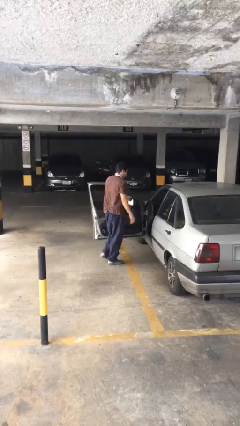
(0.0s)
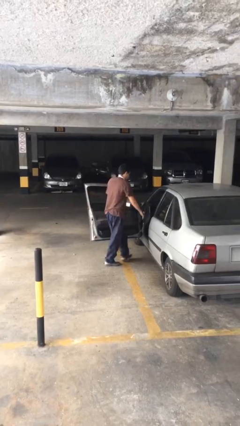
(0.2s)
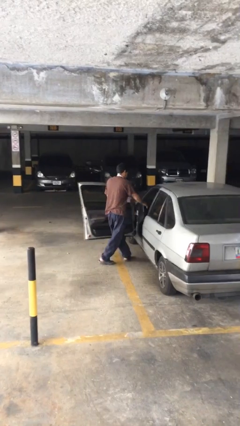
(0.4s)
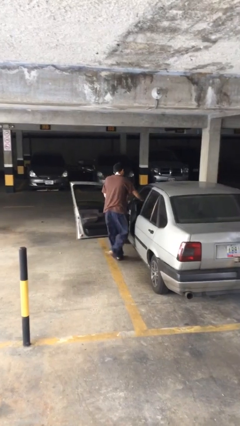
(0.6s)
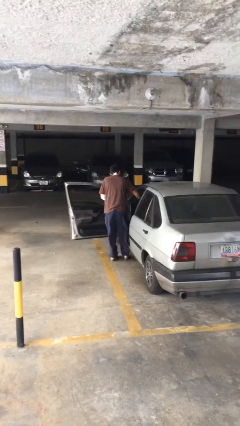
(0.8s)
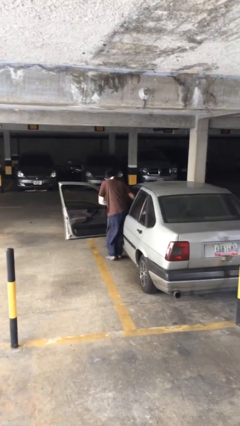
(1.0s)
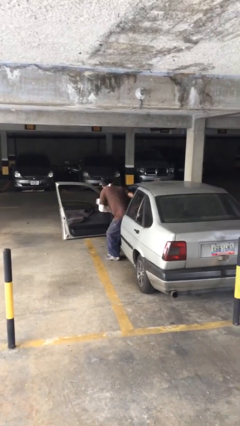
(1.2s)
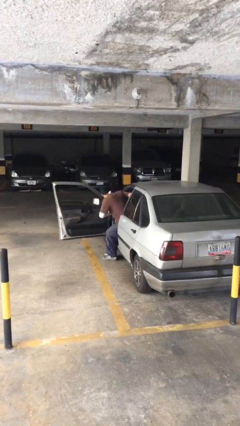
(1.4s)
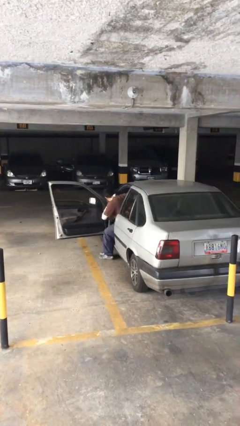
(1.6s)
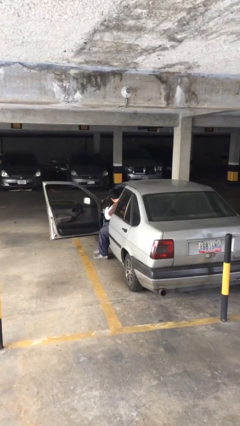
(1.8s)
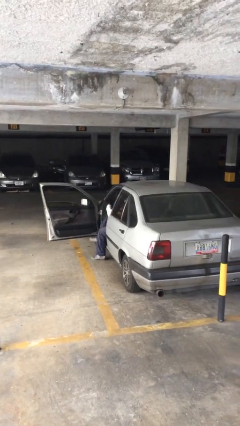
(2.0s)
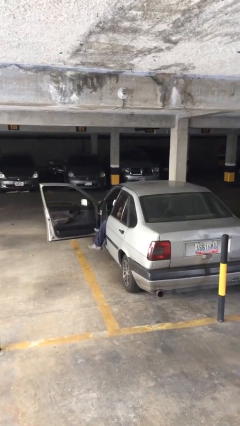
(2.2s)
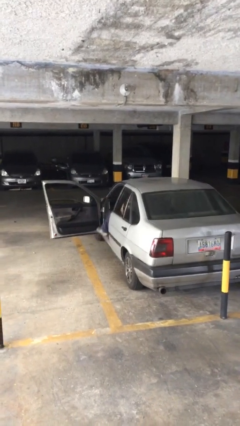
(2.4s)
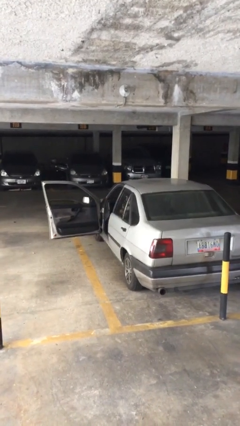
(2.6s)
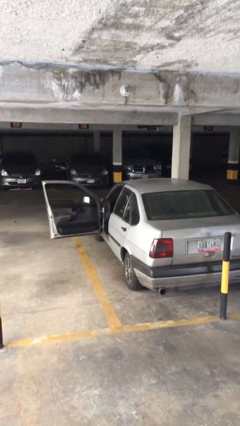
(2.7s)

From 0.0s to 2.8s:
person enters car

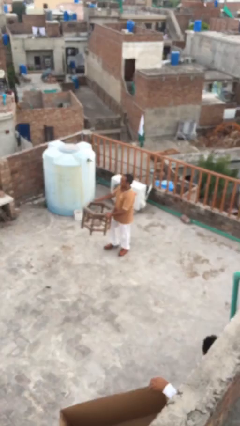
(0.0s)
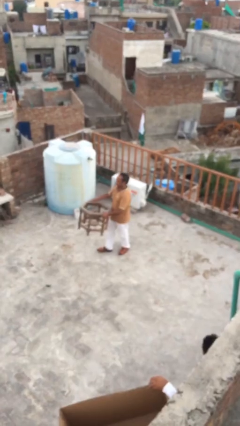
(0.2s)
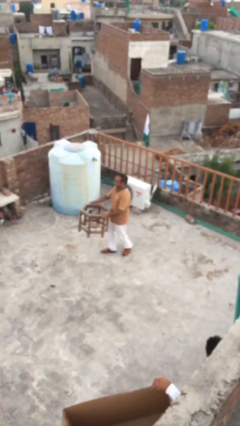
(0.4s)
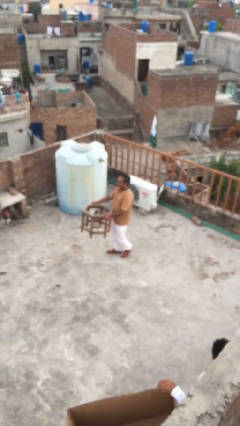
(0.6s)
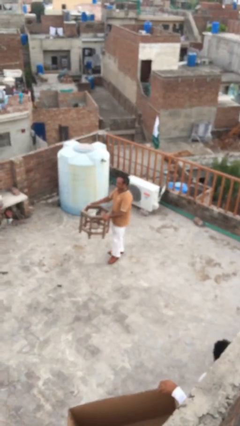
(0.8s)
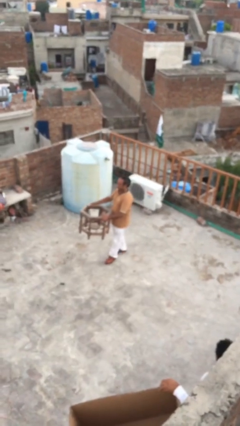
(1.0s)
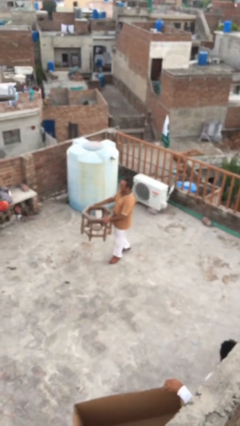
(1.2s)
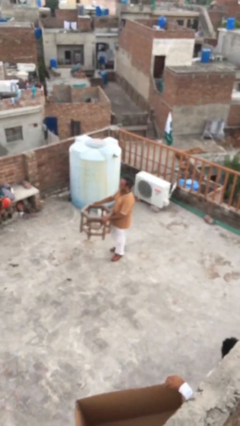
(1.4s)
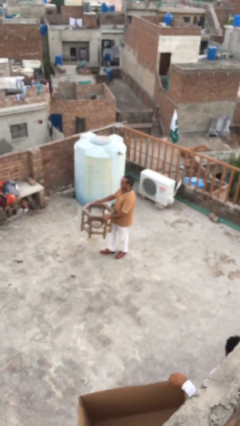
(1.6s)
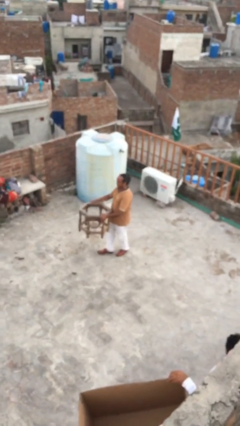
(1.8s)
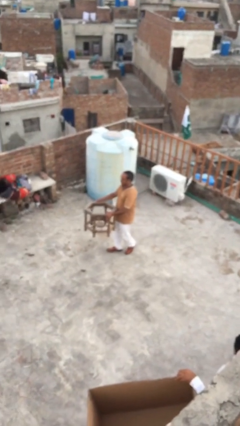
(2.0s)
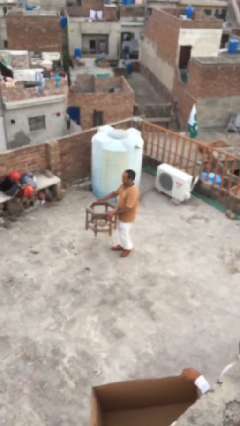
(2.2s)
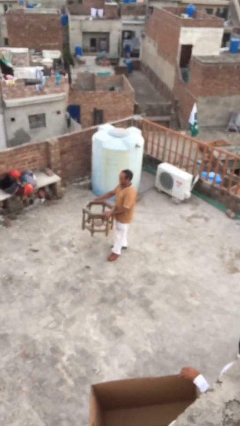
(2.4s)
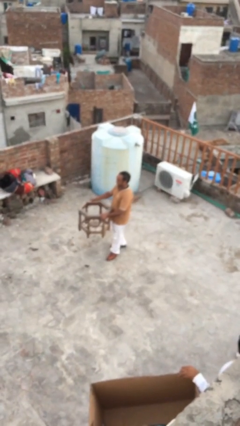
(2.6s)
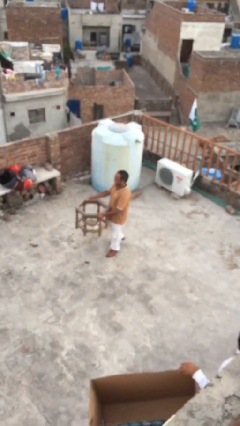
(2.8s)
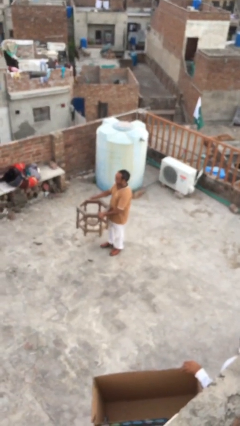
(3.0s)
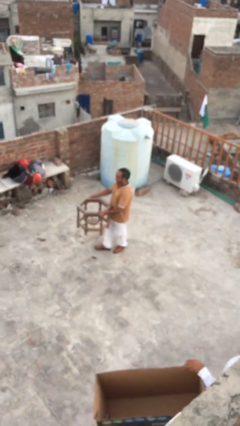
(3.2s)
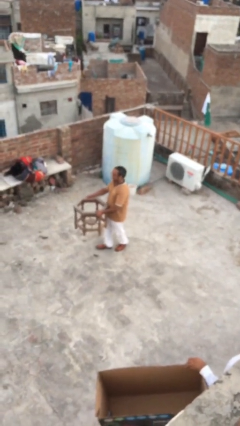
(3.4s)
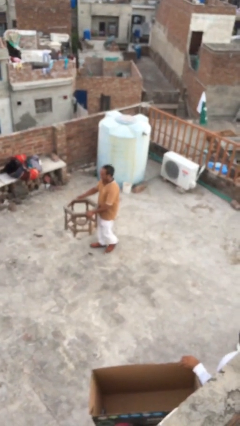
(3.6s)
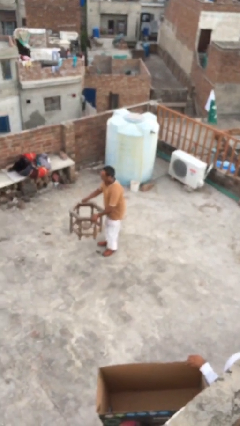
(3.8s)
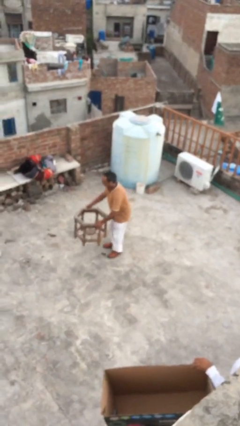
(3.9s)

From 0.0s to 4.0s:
person carries heavy object

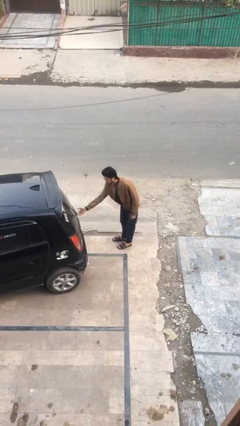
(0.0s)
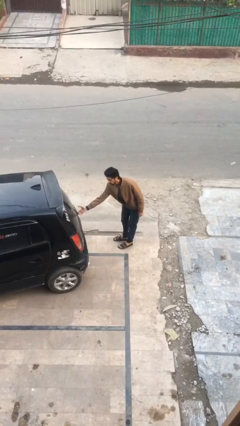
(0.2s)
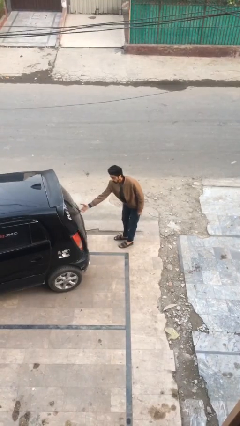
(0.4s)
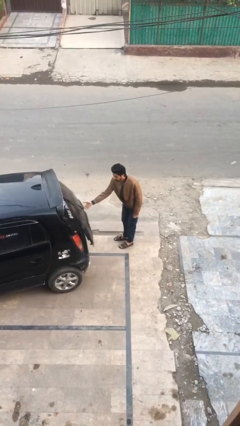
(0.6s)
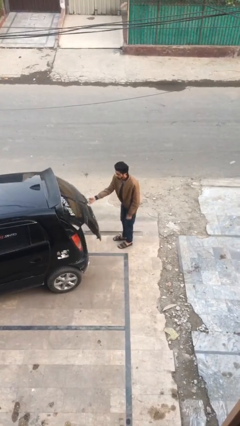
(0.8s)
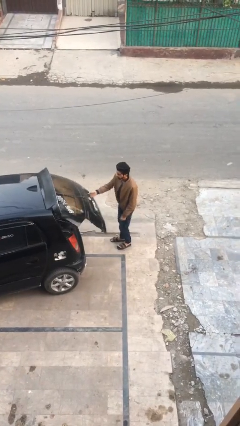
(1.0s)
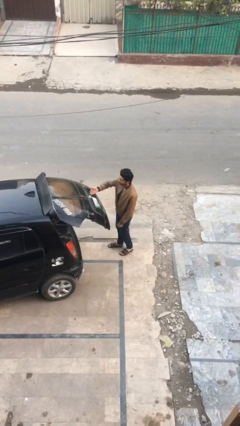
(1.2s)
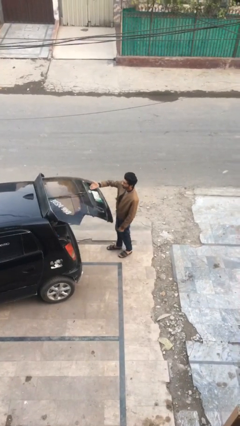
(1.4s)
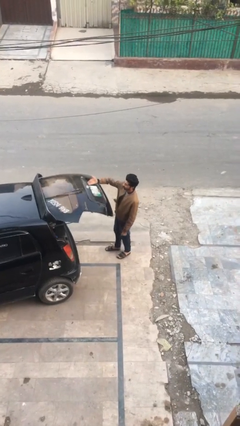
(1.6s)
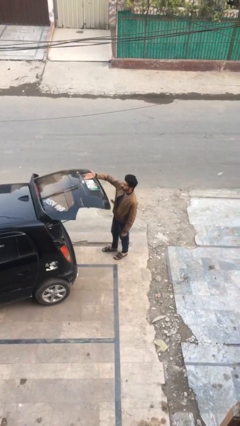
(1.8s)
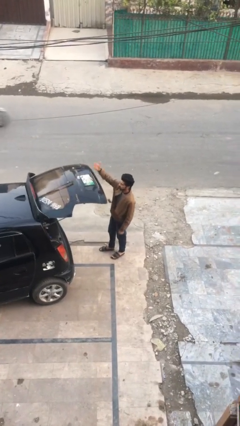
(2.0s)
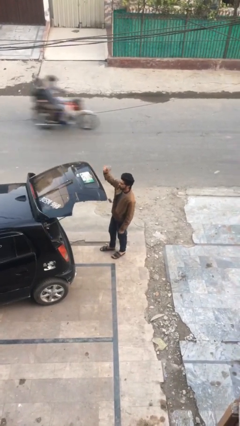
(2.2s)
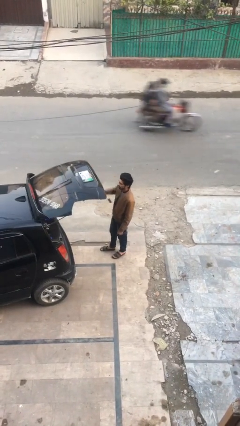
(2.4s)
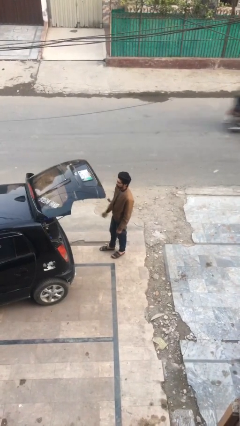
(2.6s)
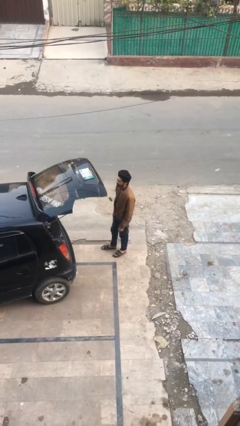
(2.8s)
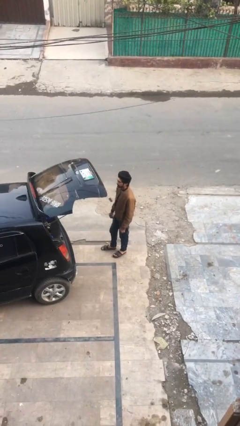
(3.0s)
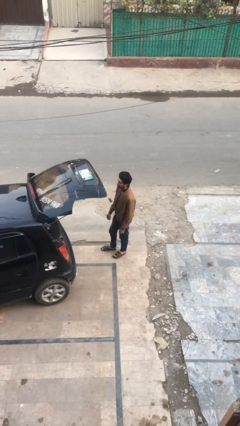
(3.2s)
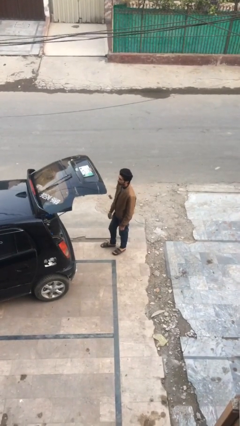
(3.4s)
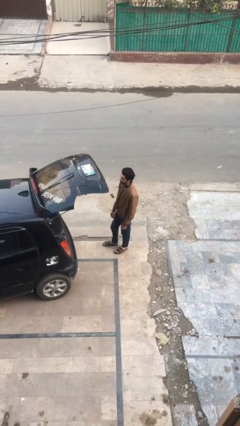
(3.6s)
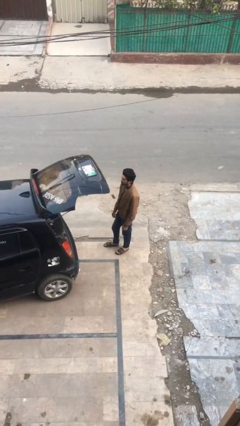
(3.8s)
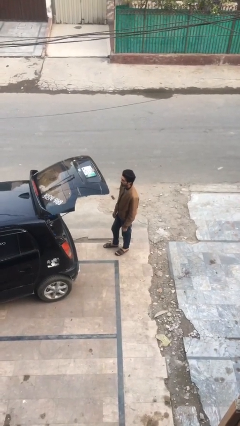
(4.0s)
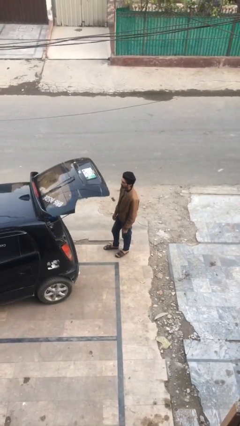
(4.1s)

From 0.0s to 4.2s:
person opens car trunk

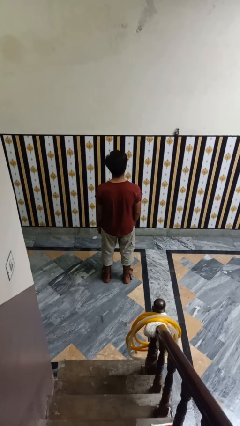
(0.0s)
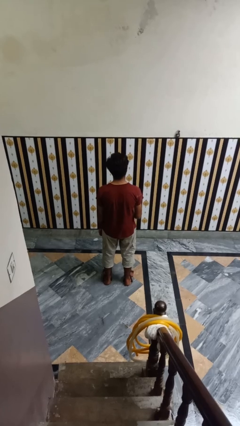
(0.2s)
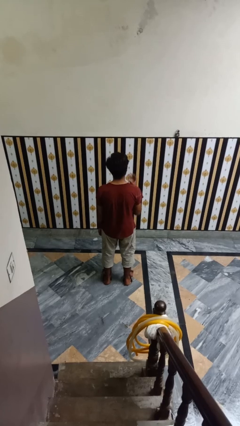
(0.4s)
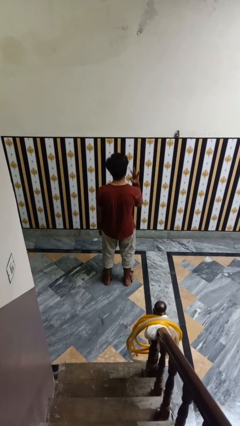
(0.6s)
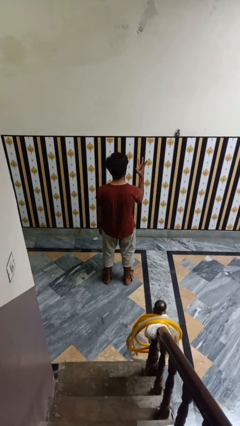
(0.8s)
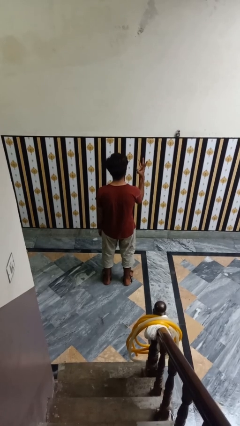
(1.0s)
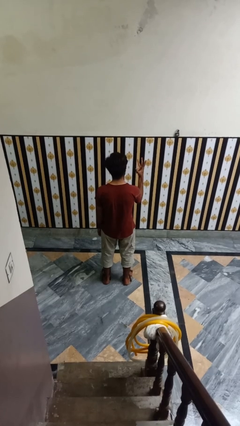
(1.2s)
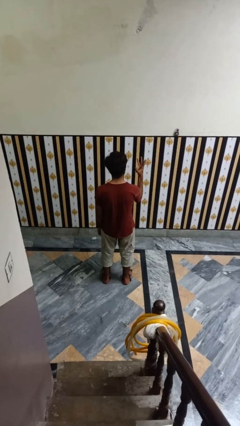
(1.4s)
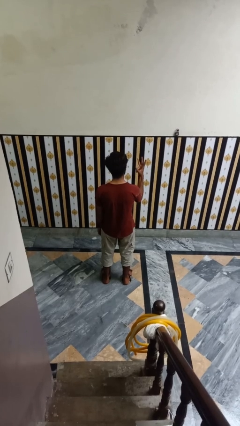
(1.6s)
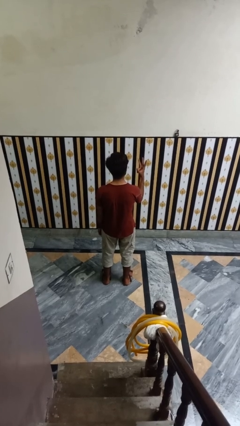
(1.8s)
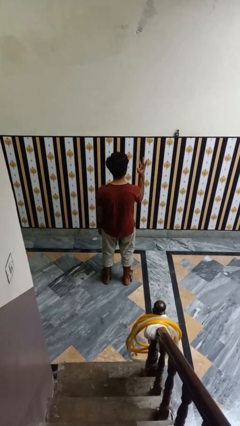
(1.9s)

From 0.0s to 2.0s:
person gestures number three

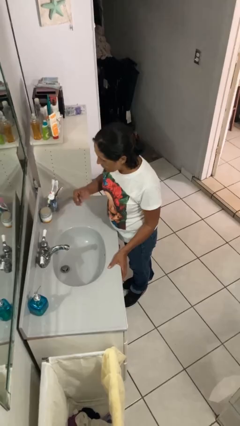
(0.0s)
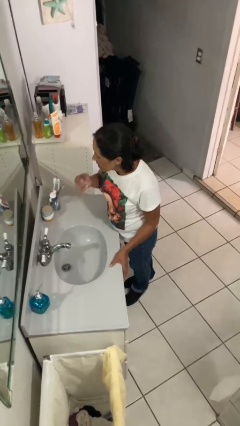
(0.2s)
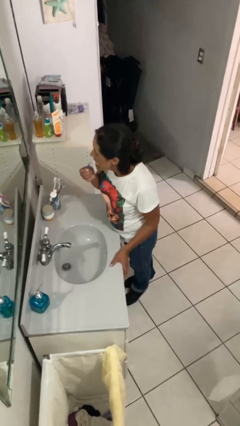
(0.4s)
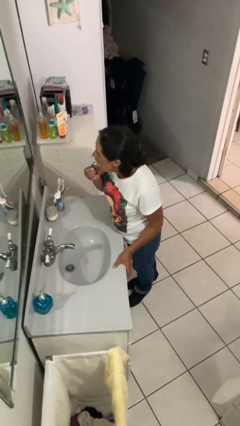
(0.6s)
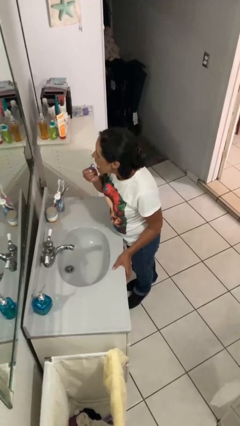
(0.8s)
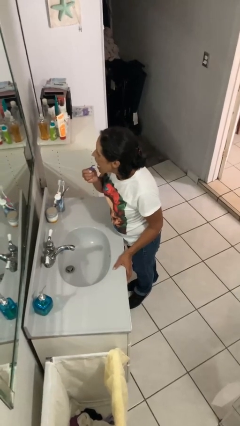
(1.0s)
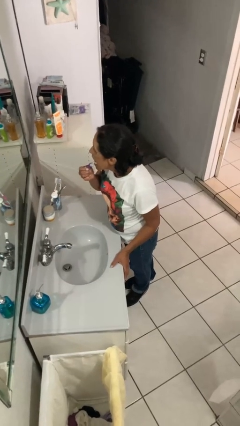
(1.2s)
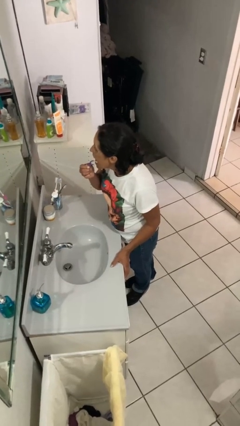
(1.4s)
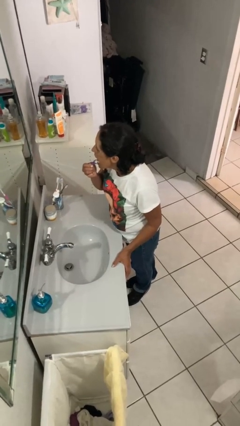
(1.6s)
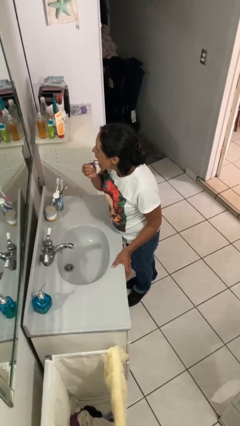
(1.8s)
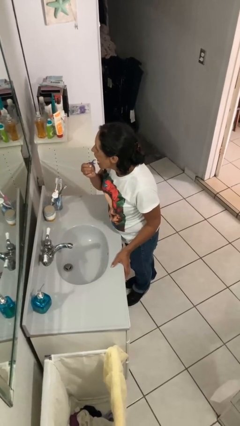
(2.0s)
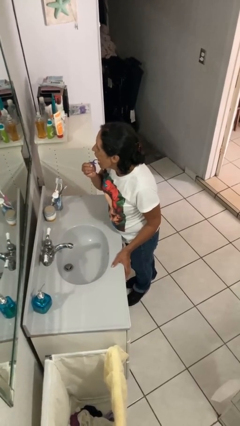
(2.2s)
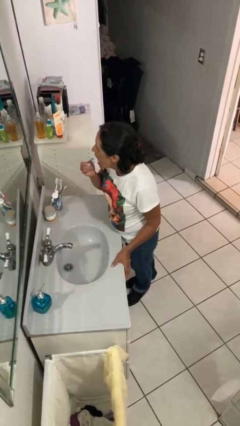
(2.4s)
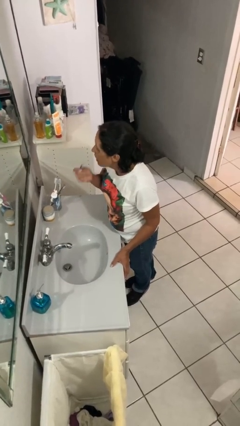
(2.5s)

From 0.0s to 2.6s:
person flosses

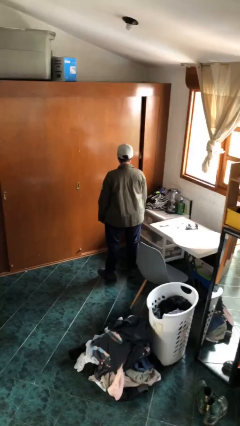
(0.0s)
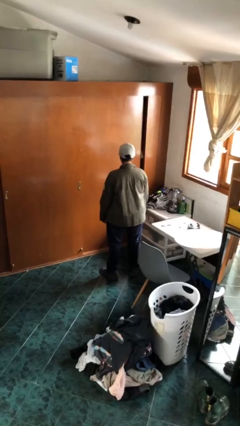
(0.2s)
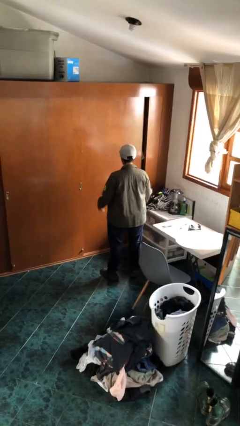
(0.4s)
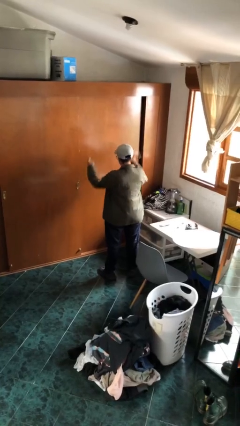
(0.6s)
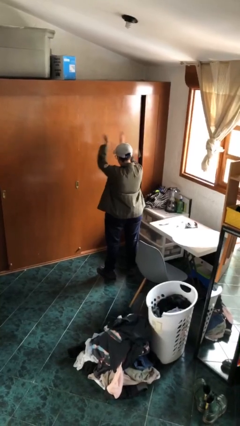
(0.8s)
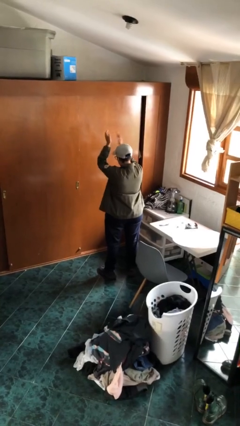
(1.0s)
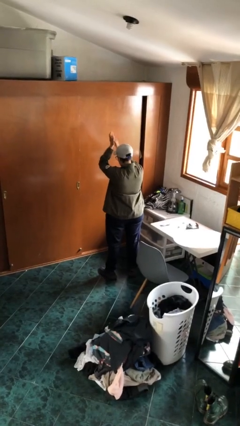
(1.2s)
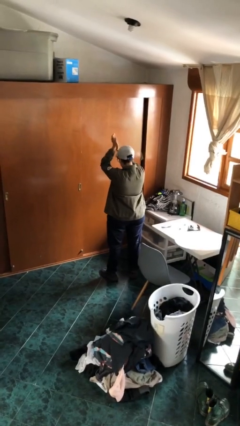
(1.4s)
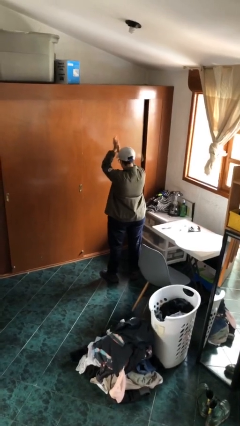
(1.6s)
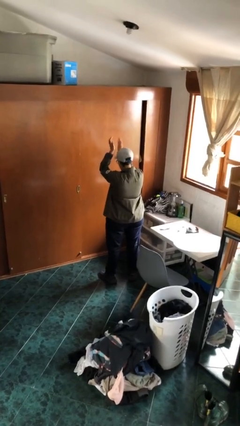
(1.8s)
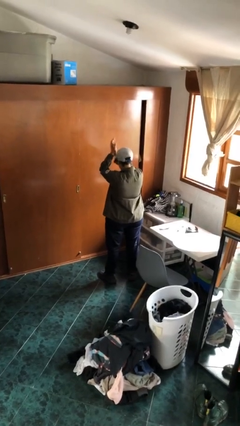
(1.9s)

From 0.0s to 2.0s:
person claps hands
